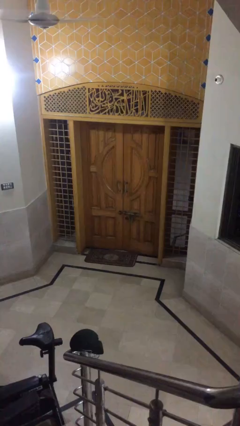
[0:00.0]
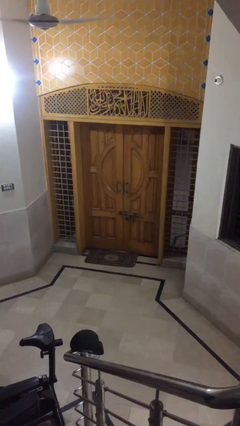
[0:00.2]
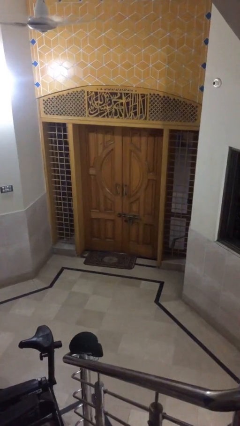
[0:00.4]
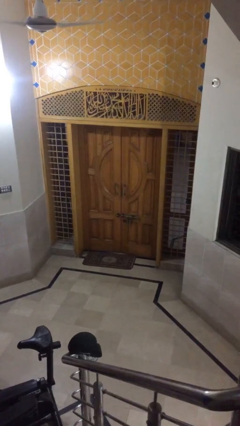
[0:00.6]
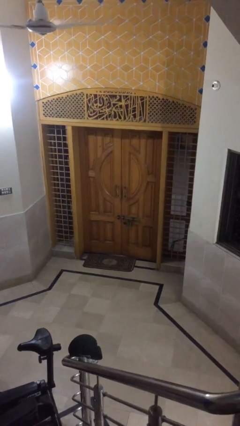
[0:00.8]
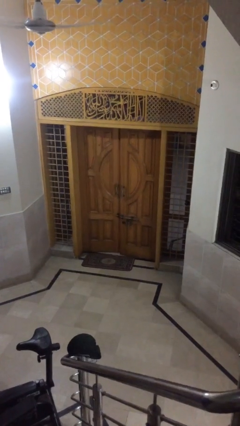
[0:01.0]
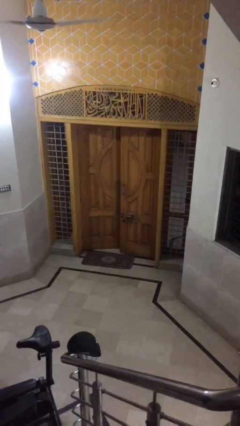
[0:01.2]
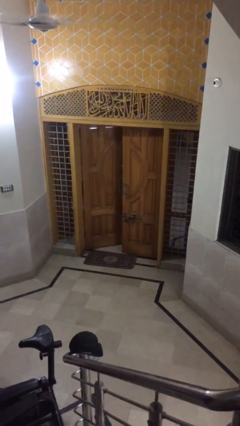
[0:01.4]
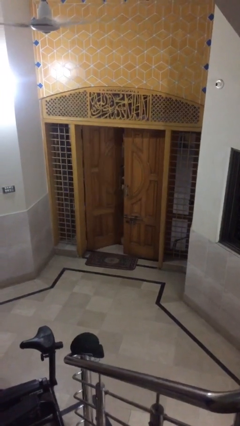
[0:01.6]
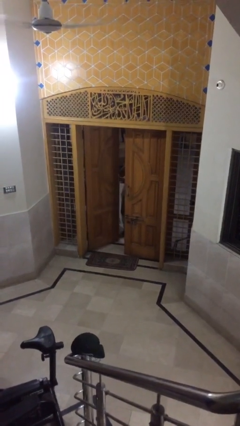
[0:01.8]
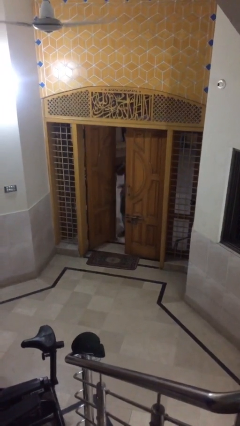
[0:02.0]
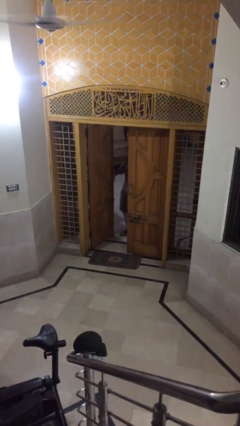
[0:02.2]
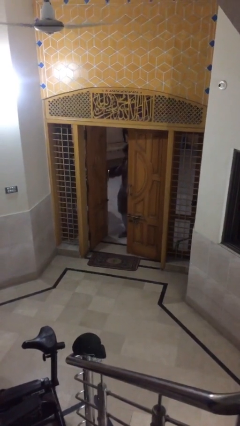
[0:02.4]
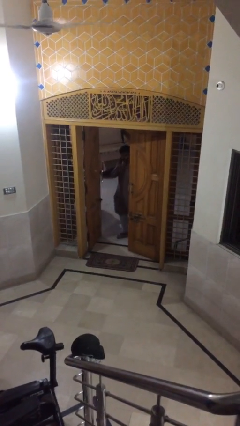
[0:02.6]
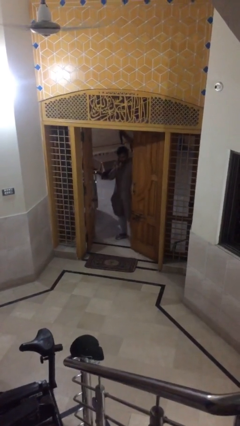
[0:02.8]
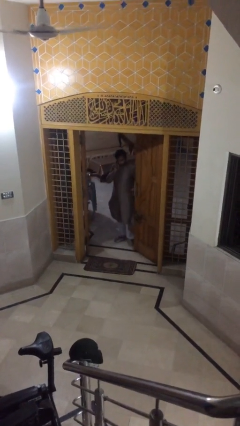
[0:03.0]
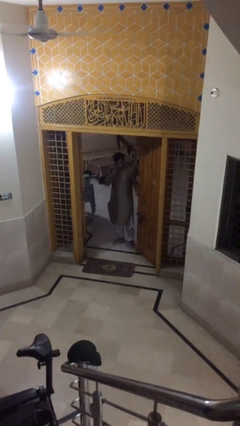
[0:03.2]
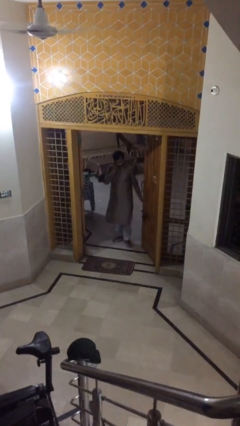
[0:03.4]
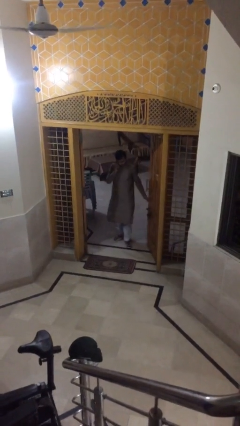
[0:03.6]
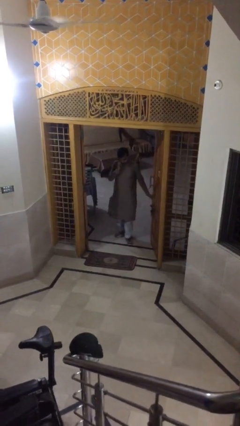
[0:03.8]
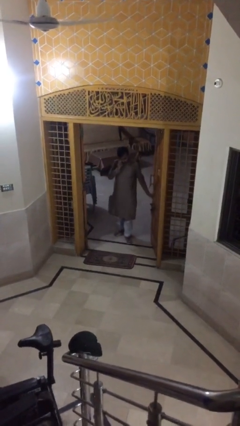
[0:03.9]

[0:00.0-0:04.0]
person opens facility door

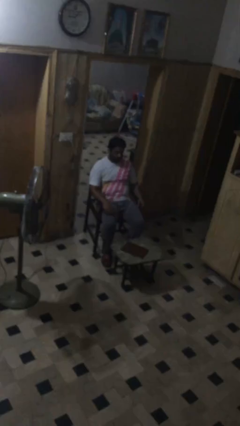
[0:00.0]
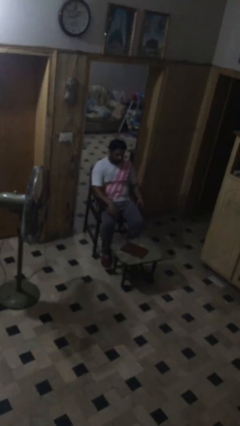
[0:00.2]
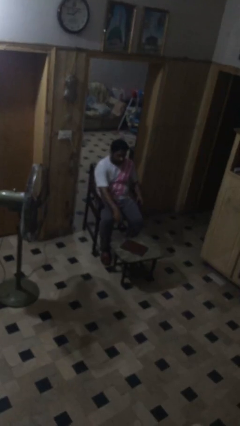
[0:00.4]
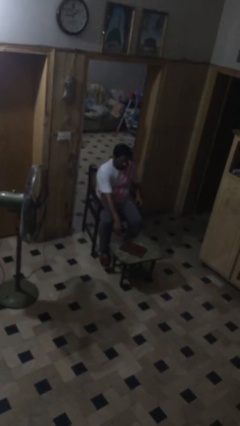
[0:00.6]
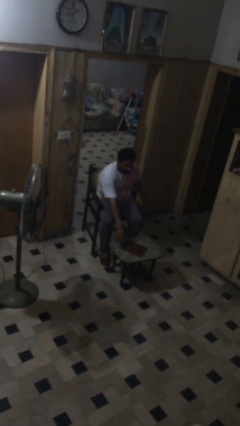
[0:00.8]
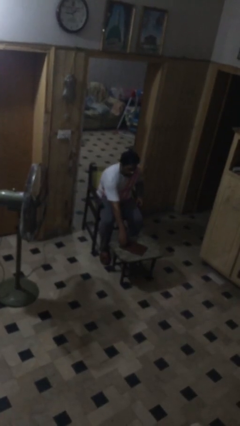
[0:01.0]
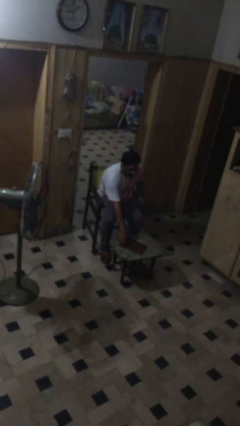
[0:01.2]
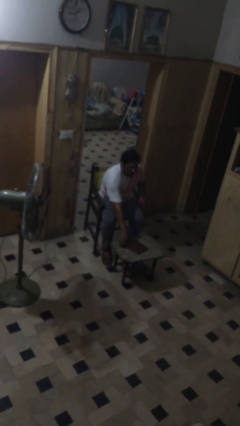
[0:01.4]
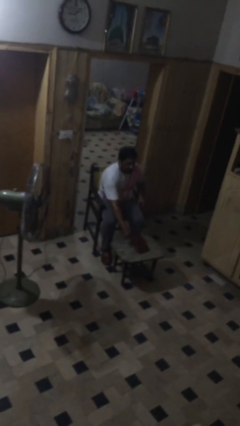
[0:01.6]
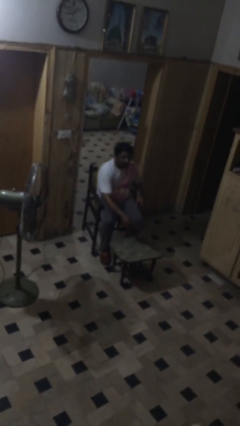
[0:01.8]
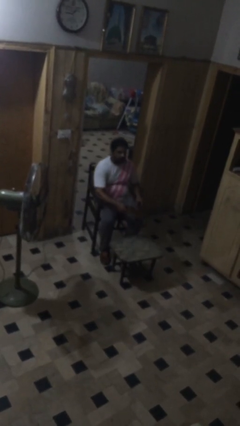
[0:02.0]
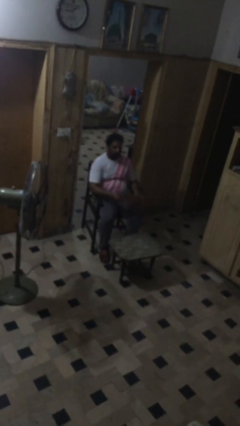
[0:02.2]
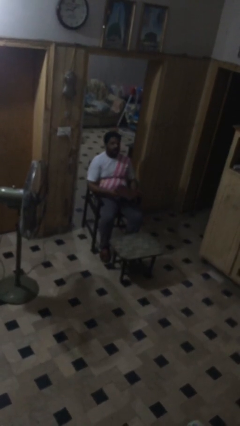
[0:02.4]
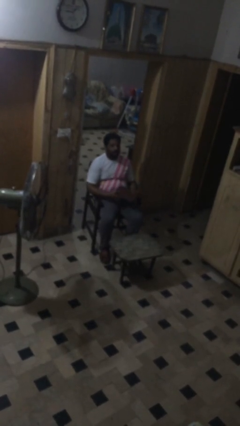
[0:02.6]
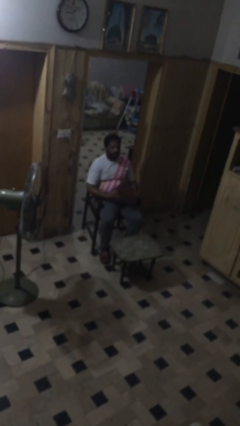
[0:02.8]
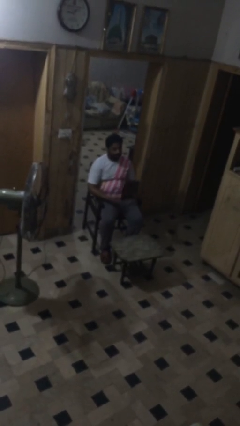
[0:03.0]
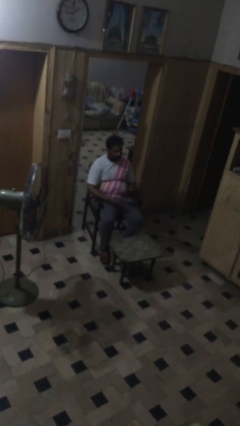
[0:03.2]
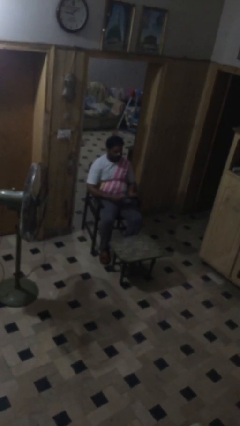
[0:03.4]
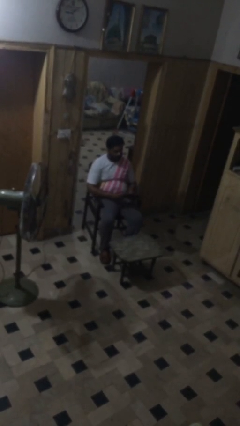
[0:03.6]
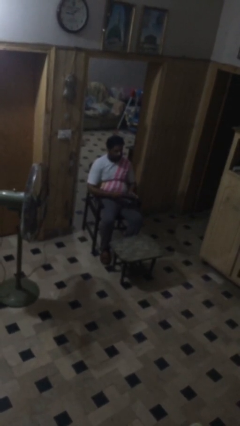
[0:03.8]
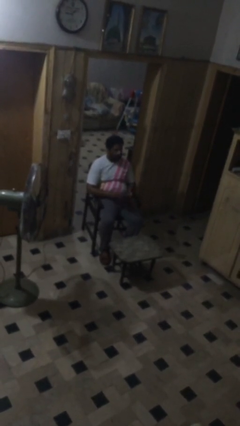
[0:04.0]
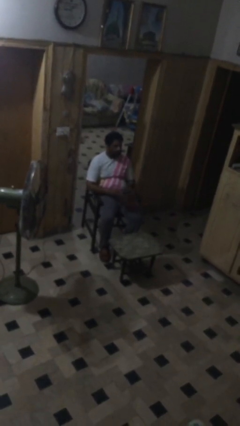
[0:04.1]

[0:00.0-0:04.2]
person picks up object from table

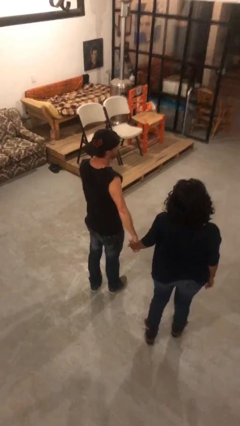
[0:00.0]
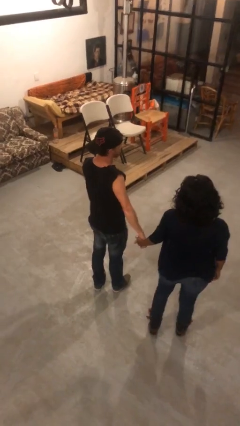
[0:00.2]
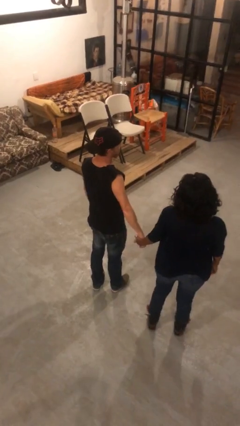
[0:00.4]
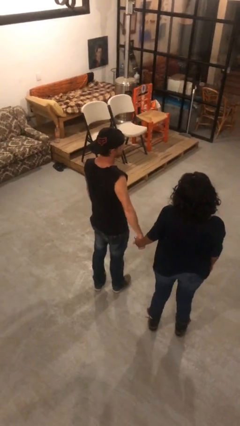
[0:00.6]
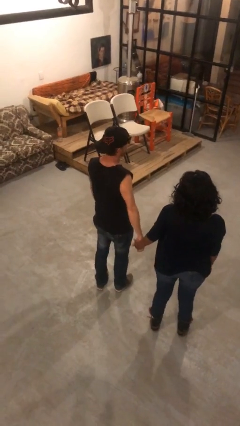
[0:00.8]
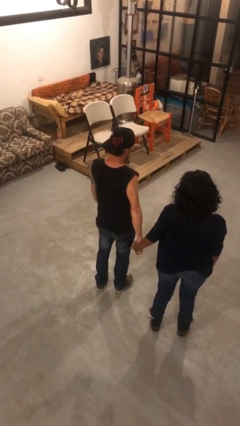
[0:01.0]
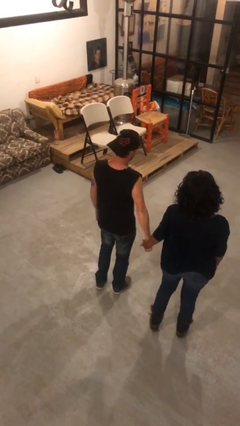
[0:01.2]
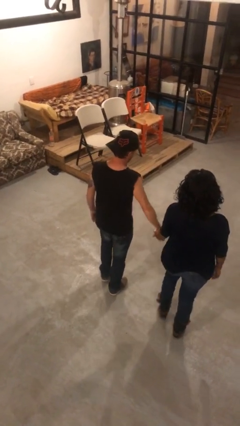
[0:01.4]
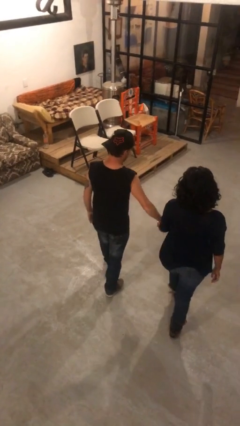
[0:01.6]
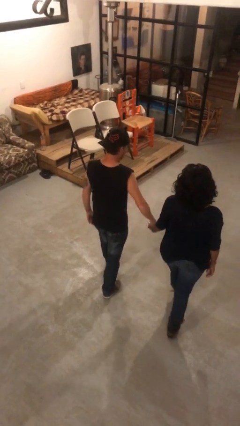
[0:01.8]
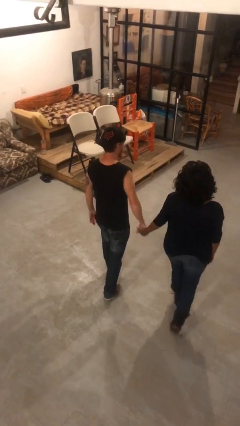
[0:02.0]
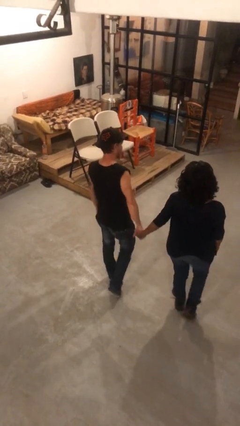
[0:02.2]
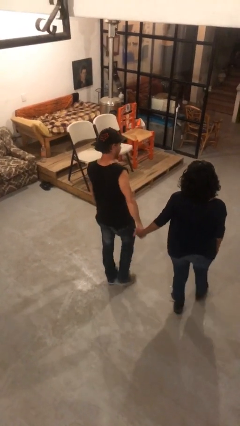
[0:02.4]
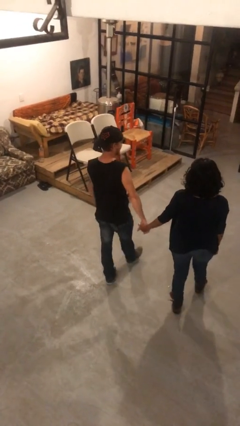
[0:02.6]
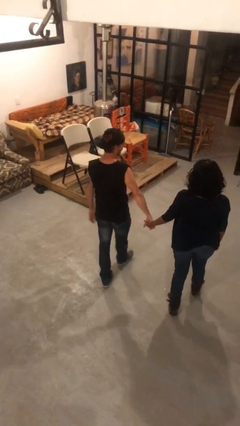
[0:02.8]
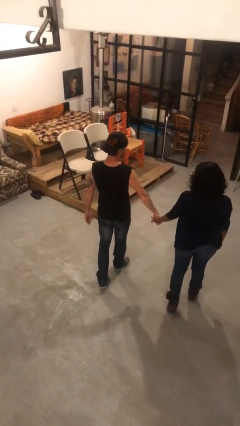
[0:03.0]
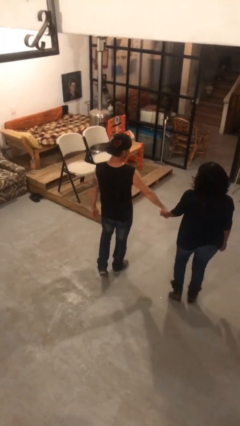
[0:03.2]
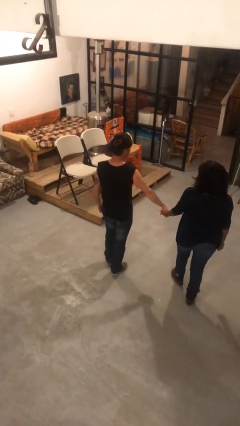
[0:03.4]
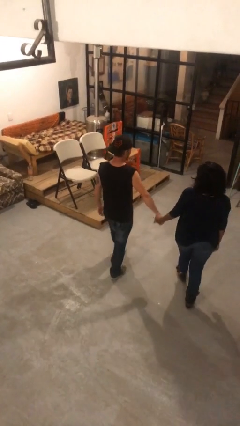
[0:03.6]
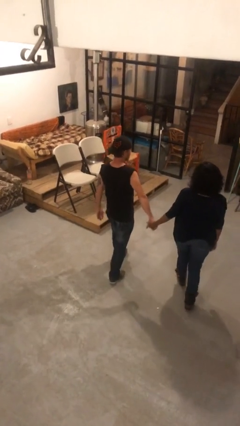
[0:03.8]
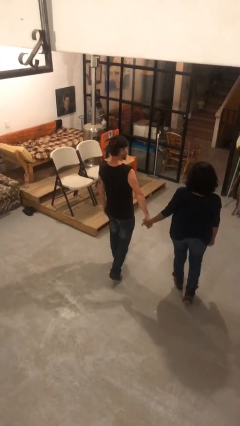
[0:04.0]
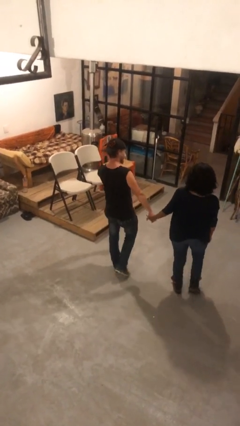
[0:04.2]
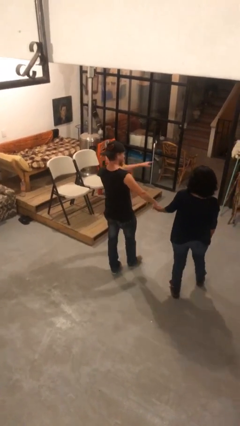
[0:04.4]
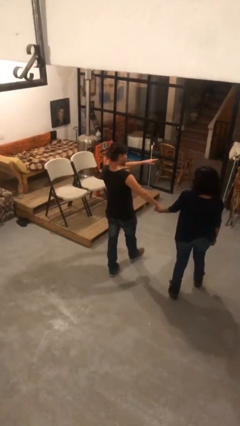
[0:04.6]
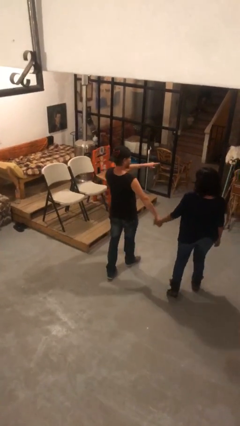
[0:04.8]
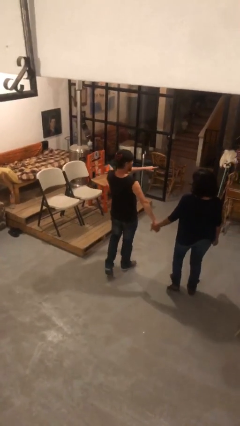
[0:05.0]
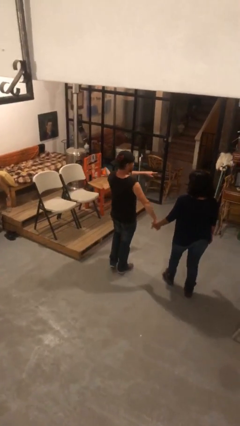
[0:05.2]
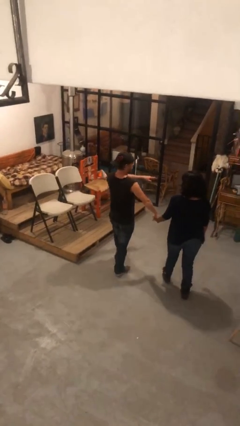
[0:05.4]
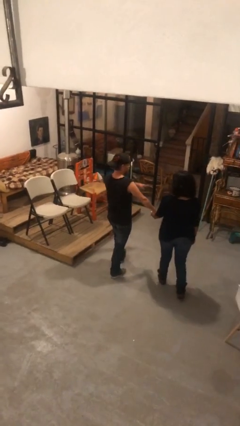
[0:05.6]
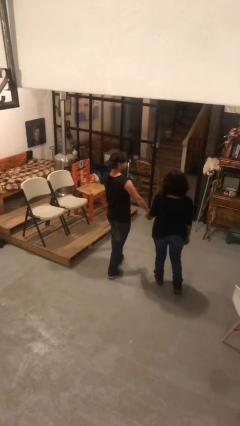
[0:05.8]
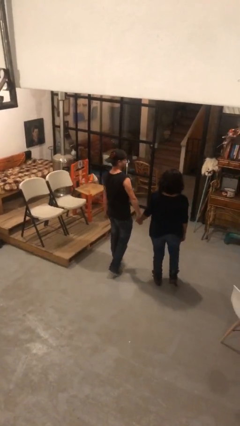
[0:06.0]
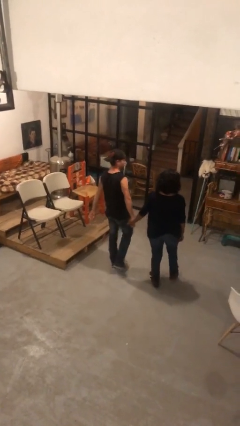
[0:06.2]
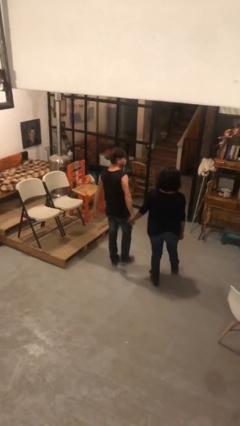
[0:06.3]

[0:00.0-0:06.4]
person holds hand

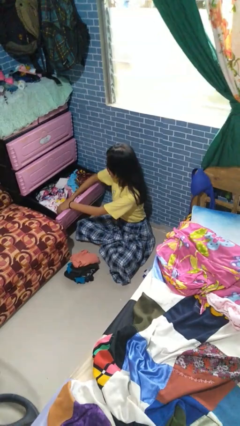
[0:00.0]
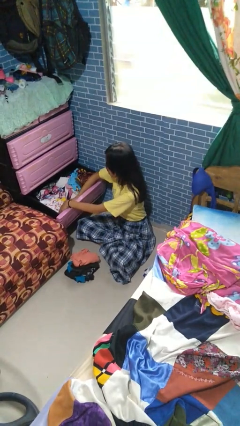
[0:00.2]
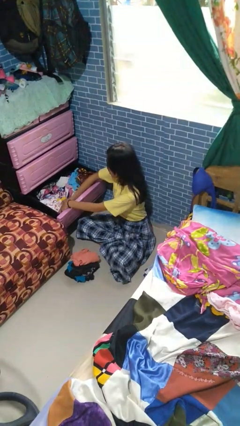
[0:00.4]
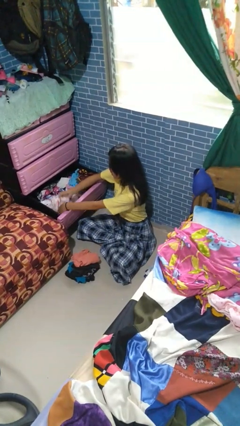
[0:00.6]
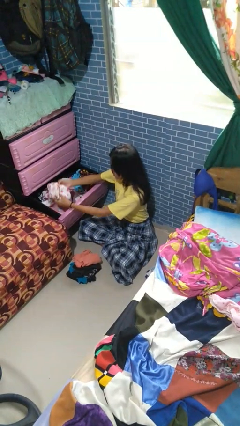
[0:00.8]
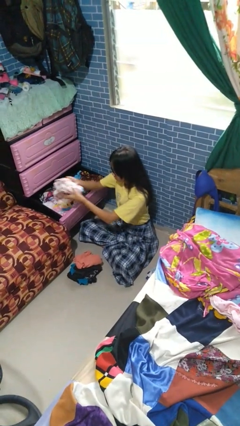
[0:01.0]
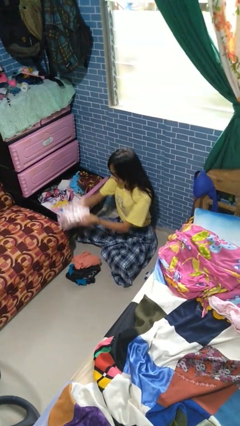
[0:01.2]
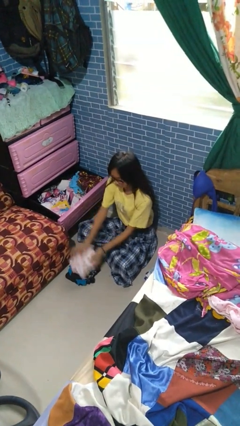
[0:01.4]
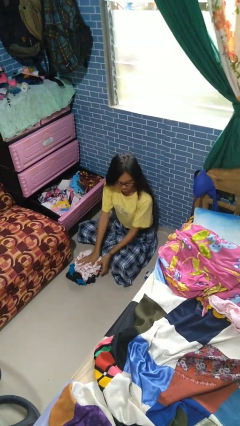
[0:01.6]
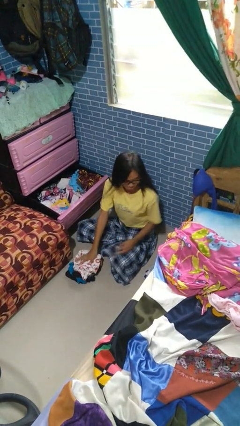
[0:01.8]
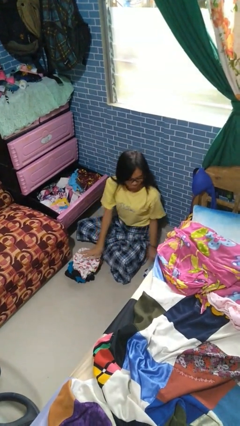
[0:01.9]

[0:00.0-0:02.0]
person takes clothes from dresser

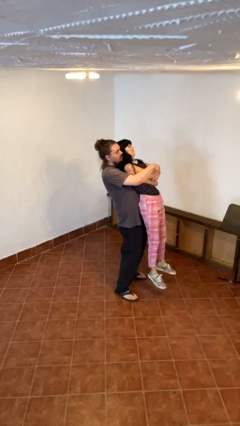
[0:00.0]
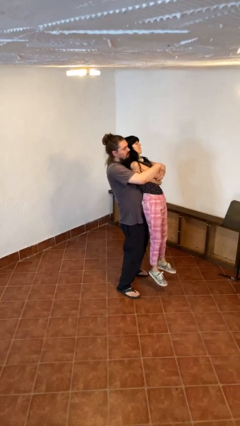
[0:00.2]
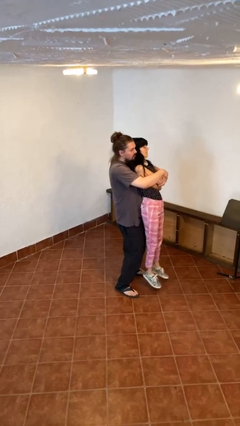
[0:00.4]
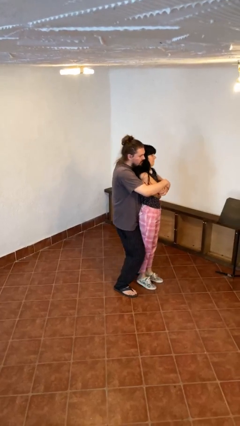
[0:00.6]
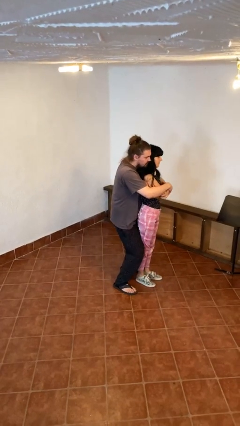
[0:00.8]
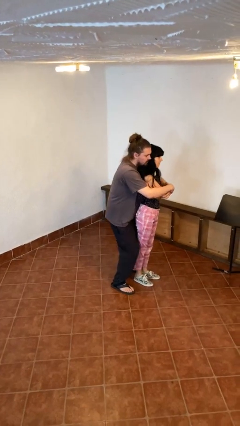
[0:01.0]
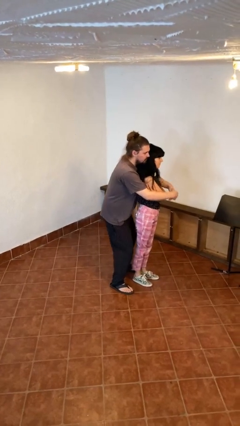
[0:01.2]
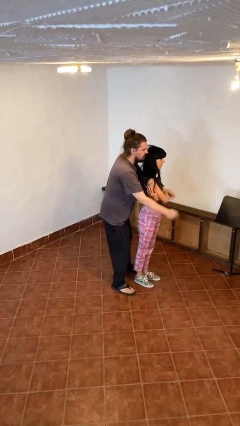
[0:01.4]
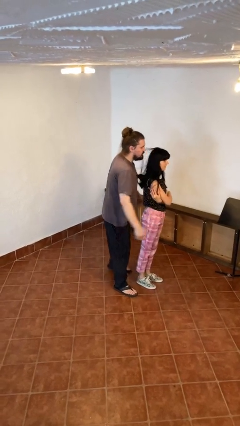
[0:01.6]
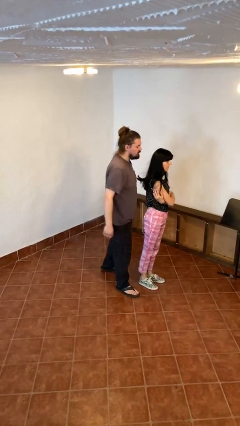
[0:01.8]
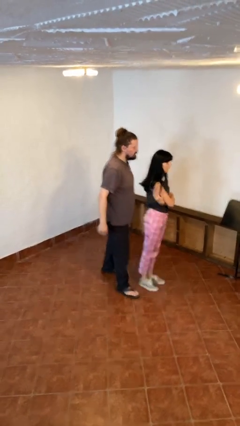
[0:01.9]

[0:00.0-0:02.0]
person puts down person
